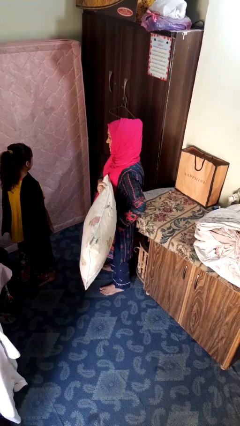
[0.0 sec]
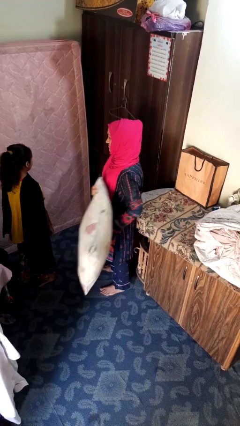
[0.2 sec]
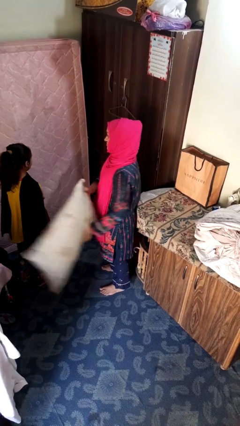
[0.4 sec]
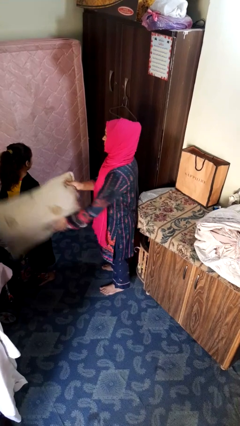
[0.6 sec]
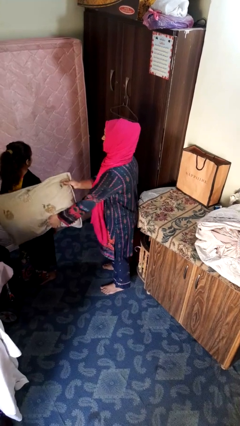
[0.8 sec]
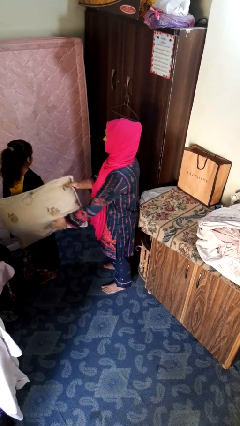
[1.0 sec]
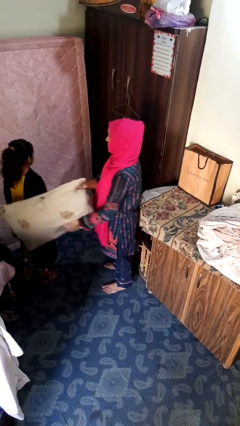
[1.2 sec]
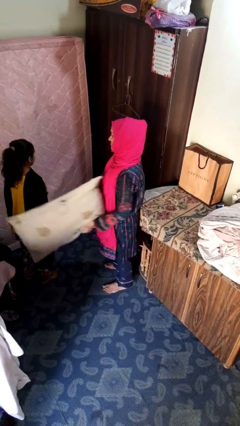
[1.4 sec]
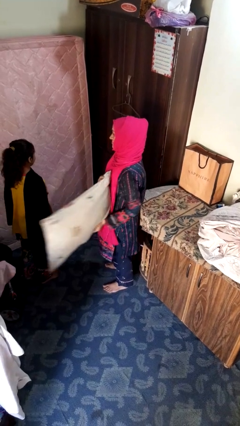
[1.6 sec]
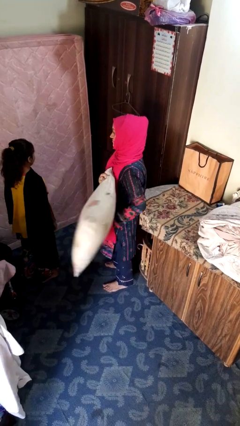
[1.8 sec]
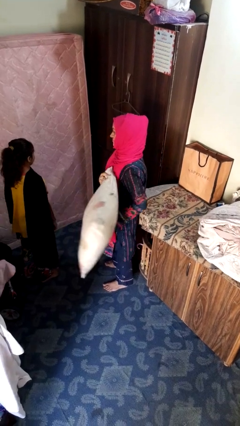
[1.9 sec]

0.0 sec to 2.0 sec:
person hits person with pillow

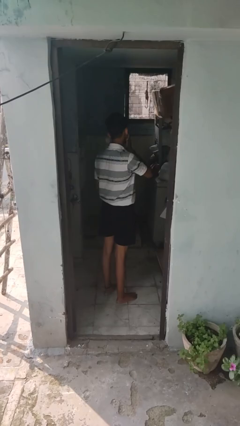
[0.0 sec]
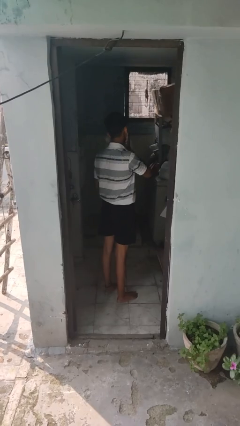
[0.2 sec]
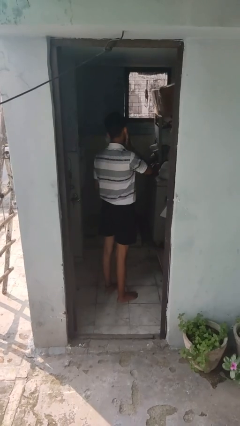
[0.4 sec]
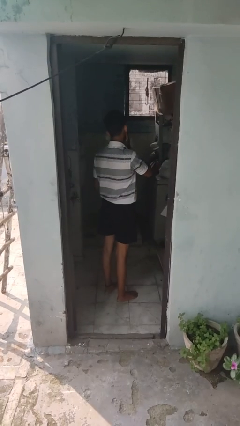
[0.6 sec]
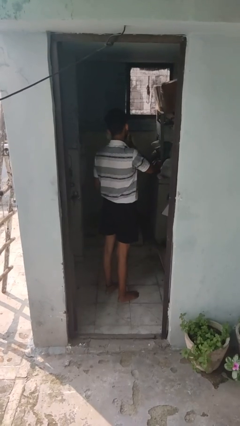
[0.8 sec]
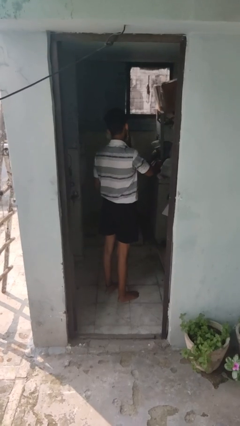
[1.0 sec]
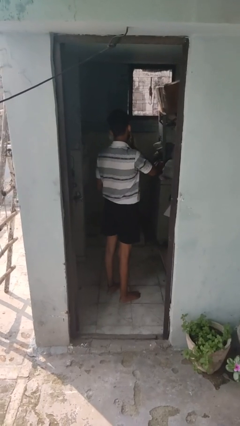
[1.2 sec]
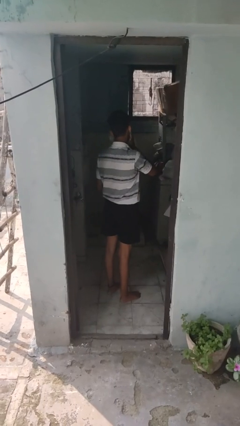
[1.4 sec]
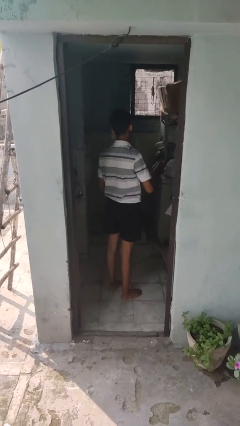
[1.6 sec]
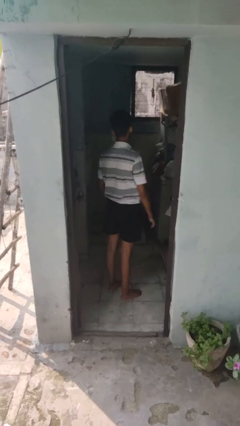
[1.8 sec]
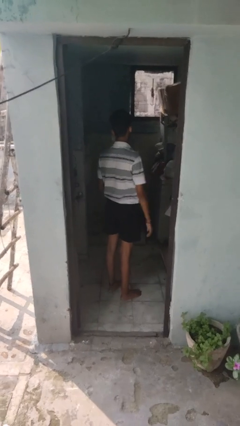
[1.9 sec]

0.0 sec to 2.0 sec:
person applies shaving cream

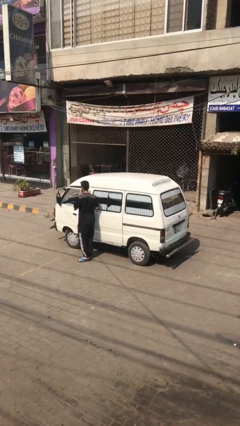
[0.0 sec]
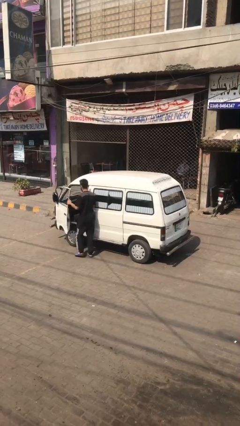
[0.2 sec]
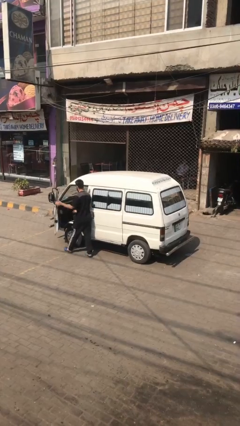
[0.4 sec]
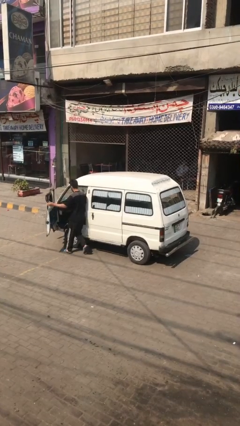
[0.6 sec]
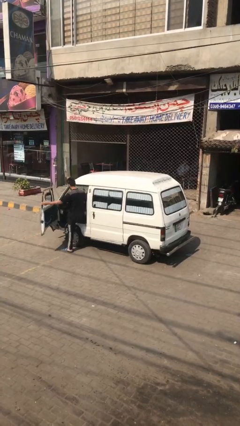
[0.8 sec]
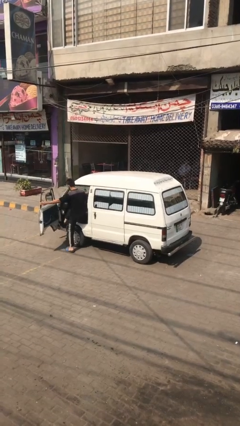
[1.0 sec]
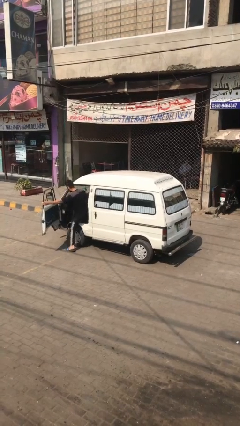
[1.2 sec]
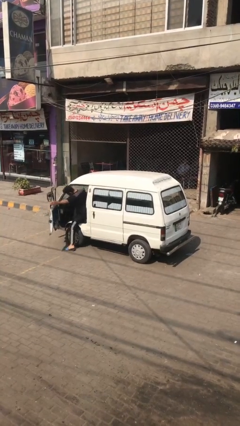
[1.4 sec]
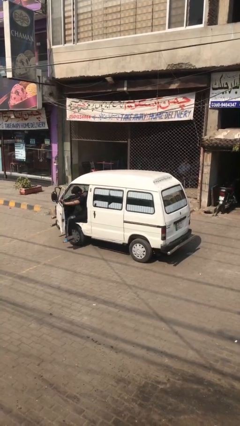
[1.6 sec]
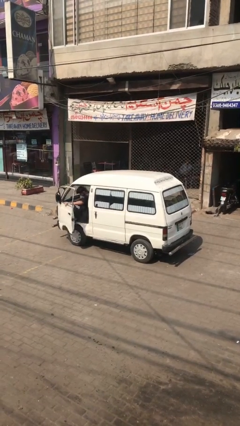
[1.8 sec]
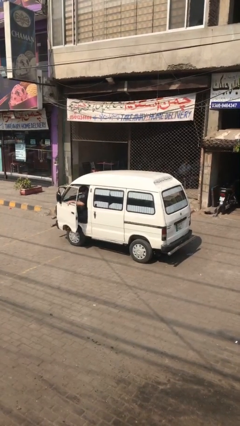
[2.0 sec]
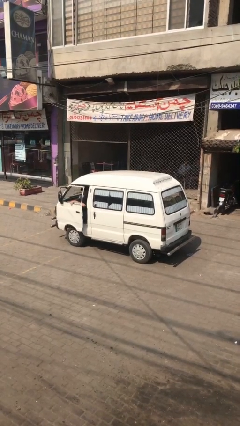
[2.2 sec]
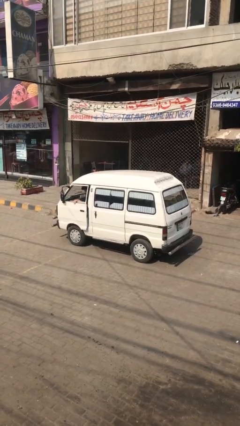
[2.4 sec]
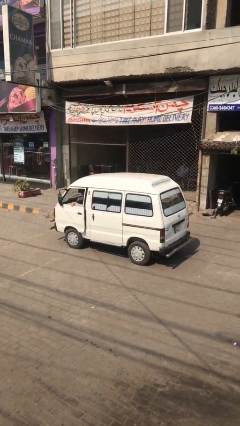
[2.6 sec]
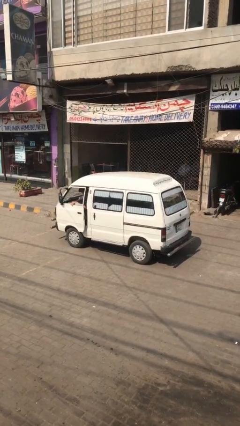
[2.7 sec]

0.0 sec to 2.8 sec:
car picks up person

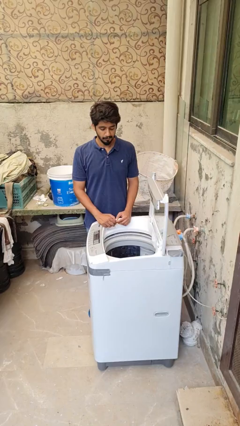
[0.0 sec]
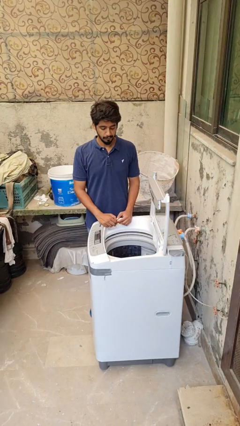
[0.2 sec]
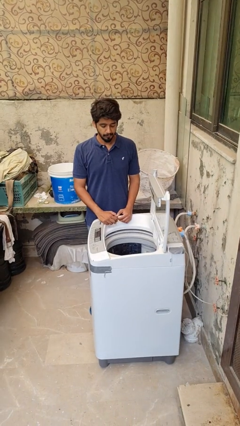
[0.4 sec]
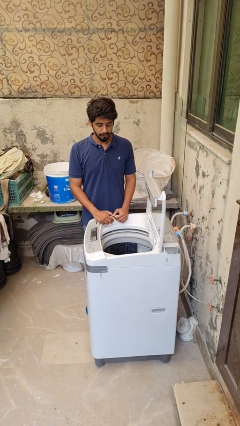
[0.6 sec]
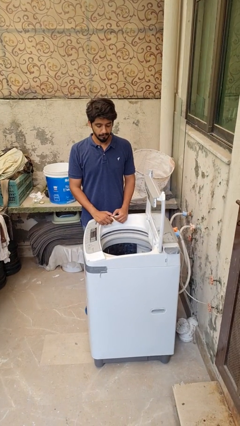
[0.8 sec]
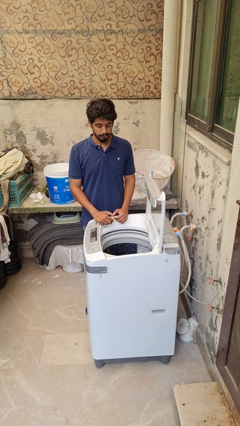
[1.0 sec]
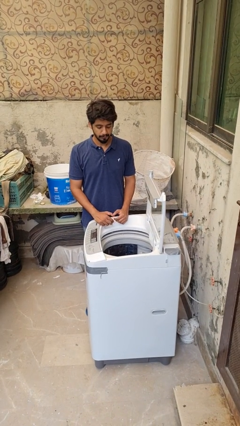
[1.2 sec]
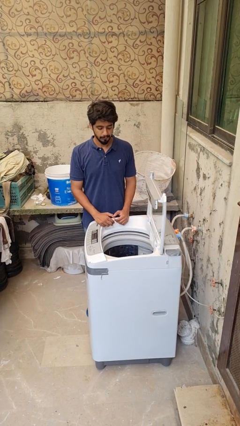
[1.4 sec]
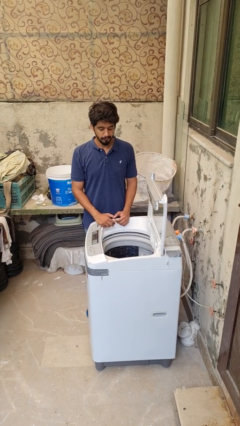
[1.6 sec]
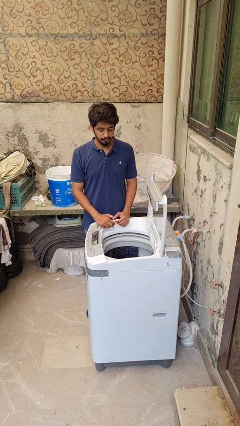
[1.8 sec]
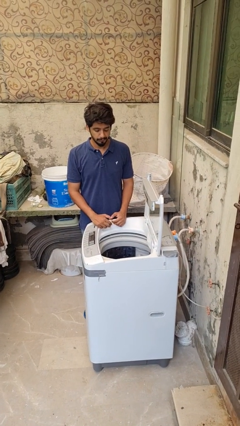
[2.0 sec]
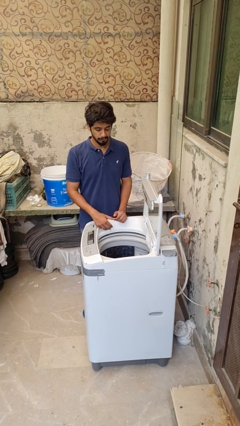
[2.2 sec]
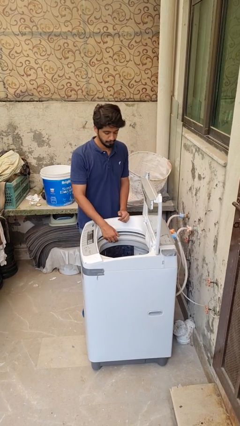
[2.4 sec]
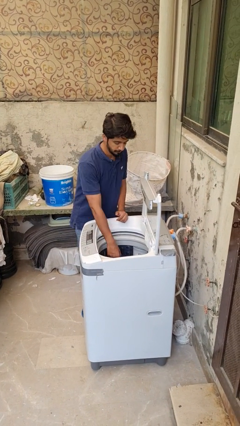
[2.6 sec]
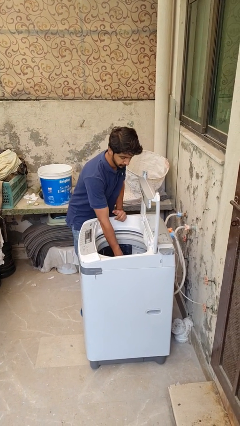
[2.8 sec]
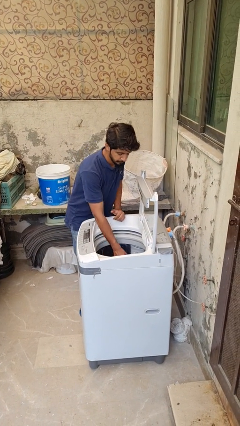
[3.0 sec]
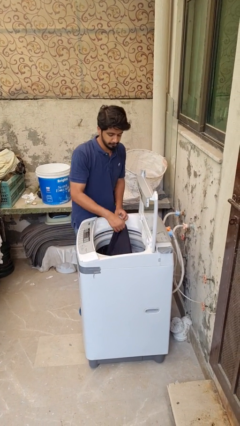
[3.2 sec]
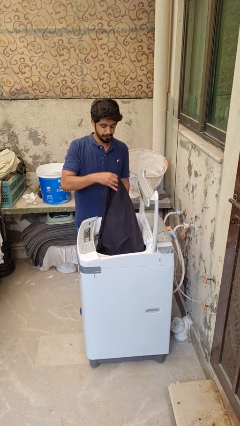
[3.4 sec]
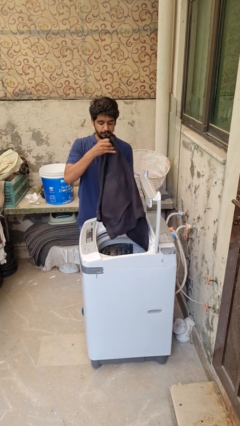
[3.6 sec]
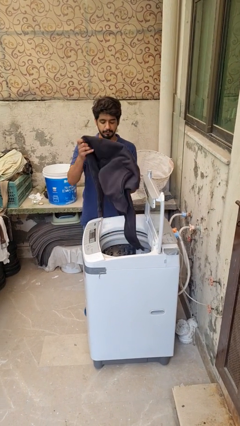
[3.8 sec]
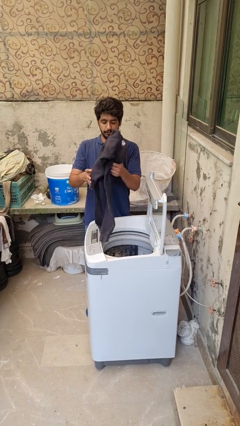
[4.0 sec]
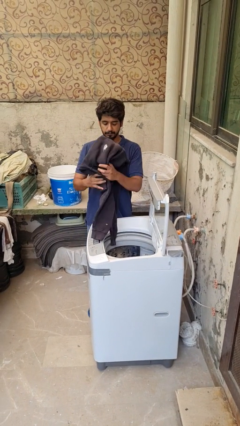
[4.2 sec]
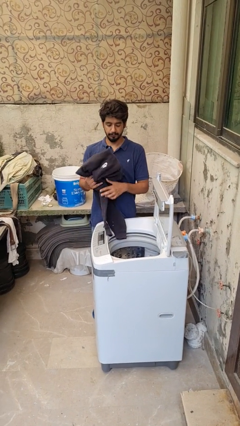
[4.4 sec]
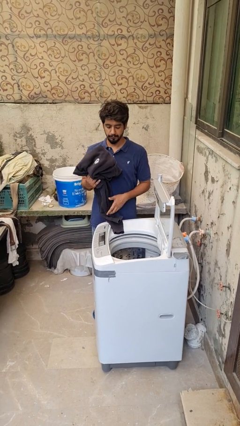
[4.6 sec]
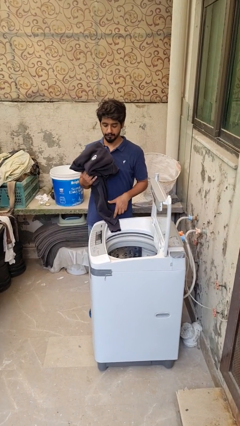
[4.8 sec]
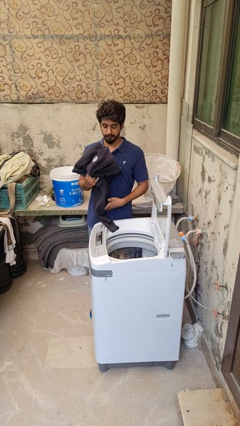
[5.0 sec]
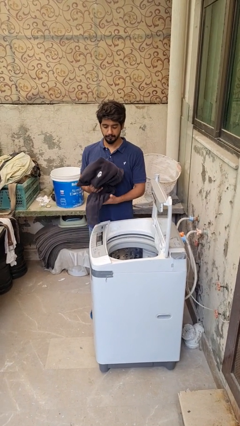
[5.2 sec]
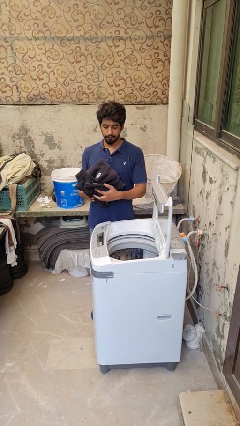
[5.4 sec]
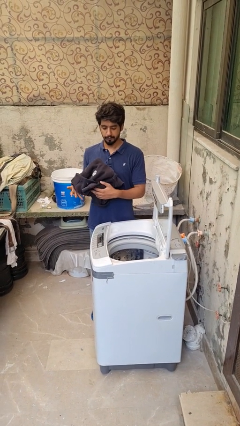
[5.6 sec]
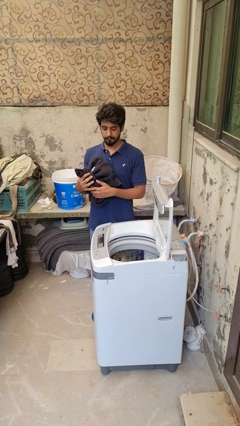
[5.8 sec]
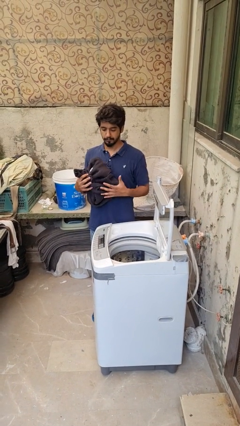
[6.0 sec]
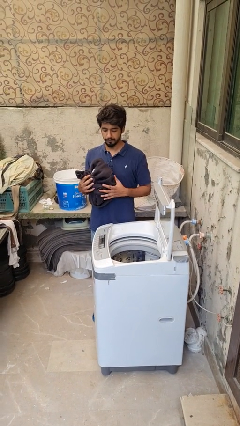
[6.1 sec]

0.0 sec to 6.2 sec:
person unloads clotheswasher

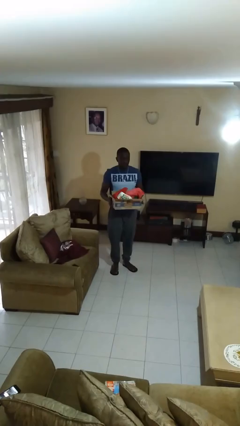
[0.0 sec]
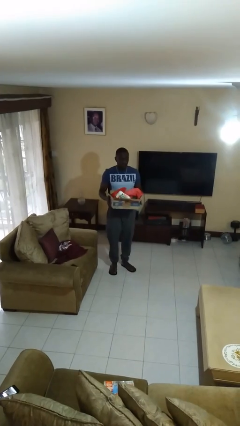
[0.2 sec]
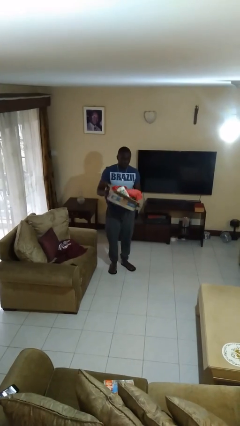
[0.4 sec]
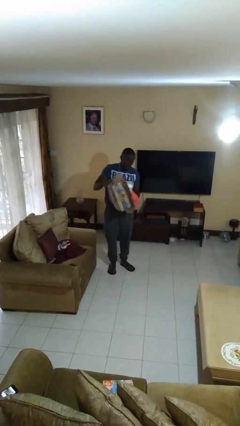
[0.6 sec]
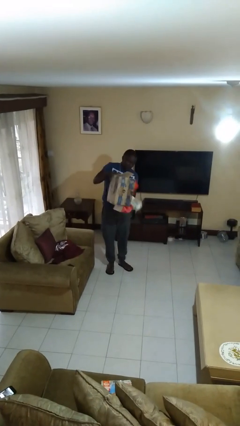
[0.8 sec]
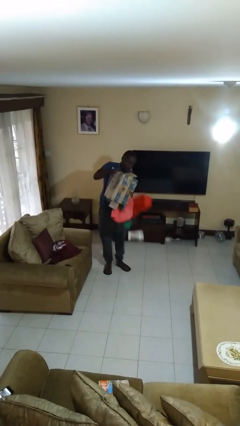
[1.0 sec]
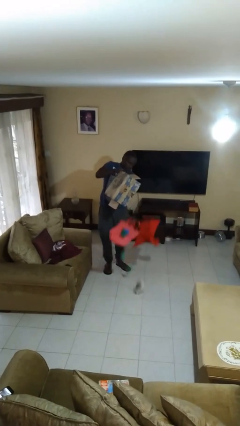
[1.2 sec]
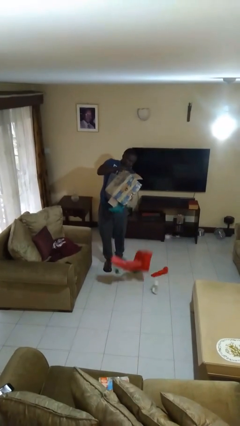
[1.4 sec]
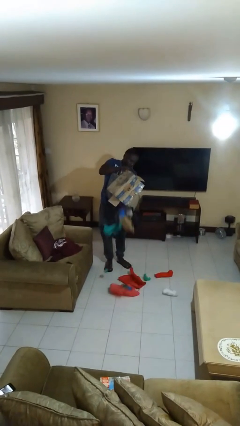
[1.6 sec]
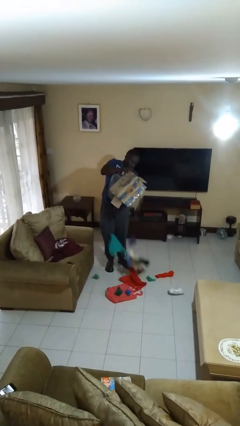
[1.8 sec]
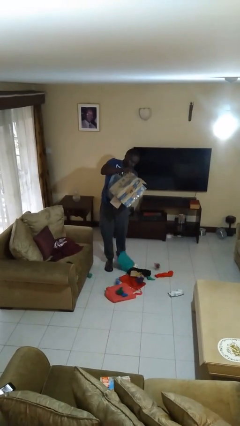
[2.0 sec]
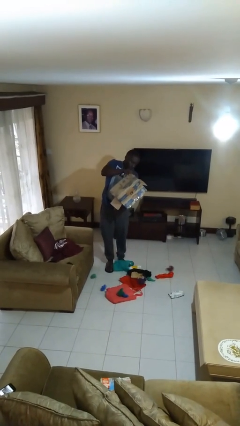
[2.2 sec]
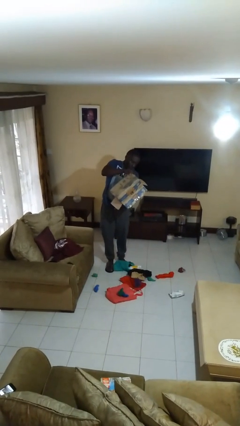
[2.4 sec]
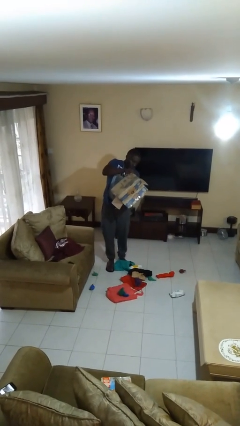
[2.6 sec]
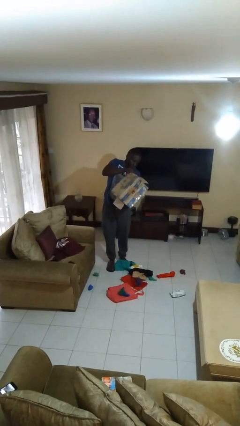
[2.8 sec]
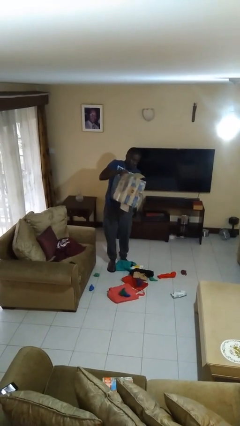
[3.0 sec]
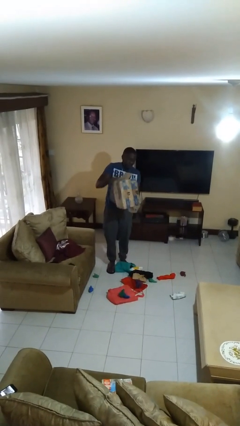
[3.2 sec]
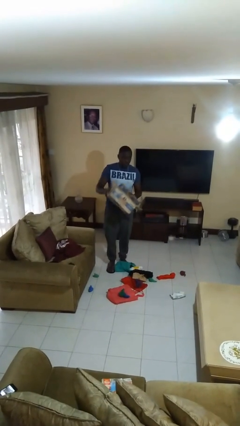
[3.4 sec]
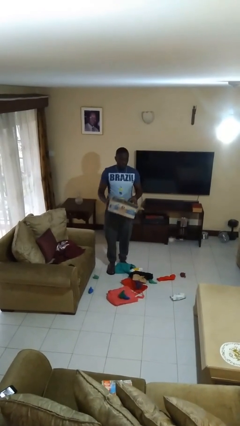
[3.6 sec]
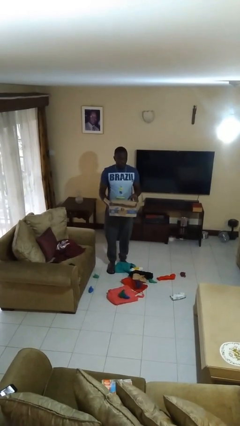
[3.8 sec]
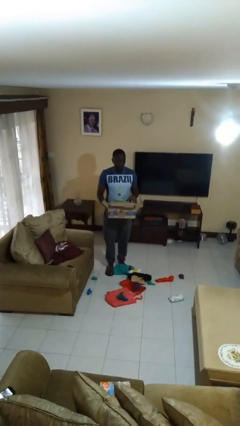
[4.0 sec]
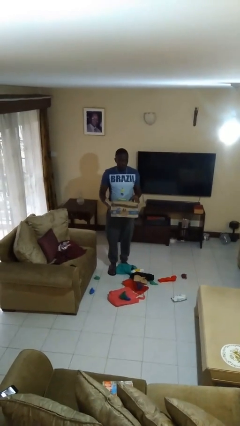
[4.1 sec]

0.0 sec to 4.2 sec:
person unloads box onto floor

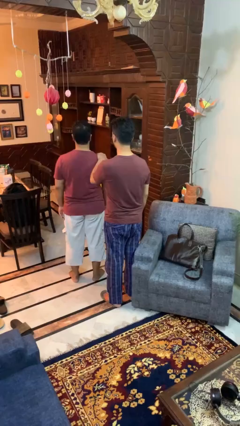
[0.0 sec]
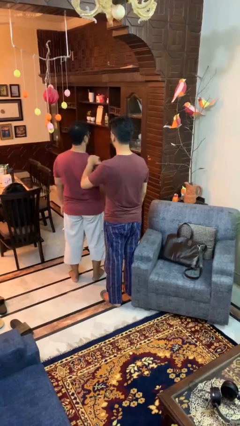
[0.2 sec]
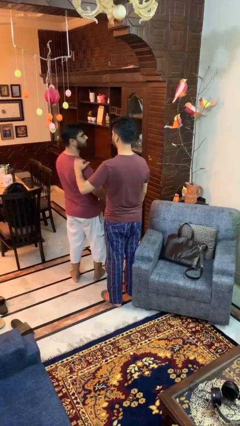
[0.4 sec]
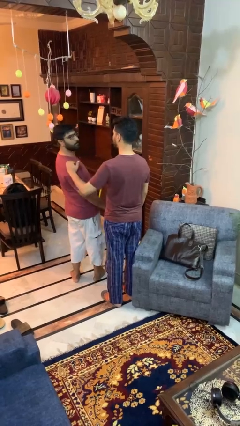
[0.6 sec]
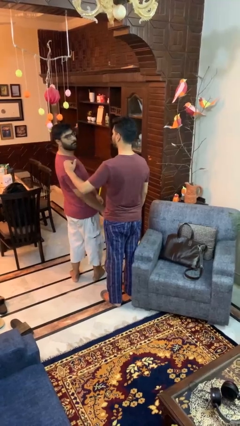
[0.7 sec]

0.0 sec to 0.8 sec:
person spins person around
